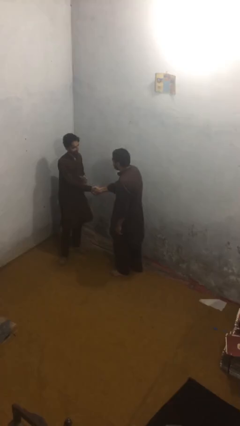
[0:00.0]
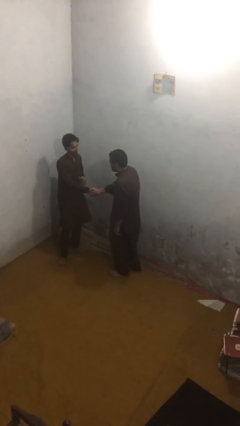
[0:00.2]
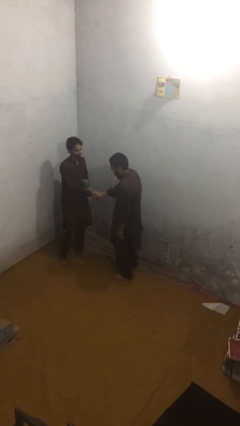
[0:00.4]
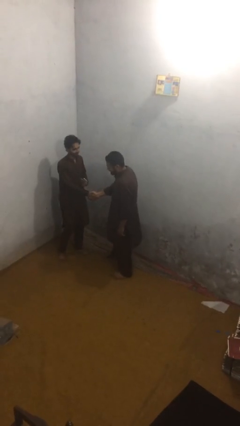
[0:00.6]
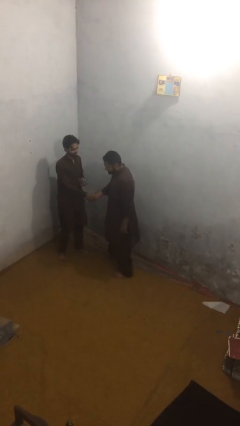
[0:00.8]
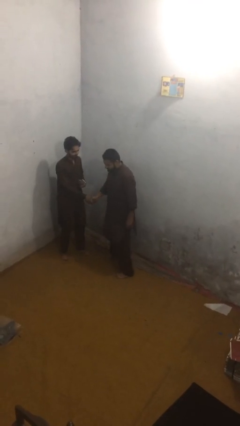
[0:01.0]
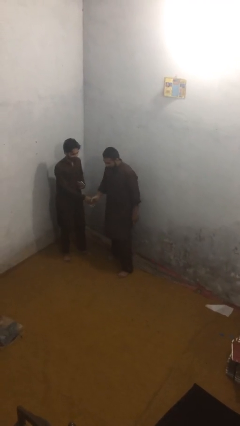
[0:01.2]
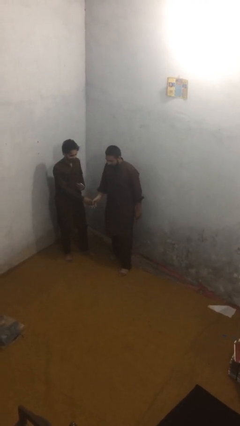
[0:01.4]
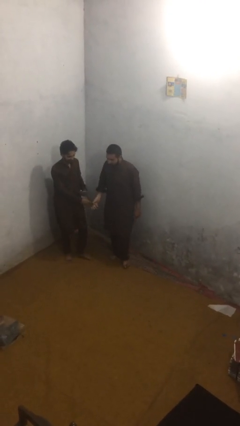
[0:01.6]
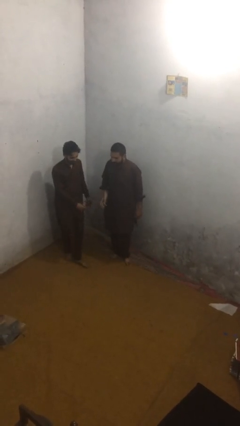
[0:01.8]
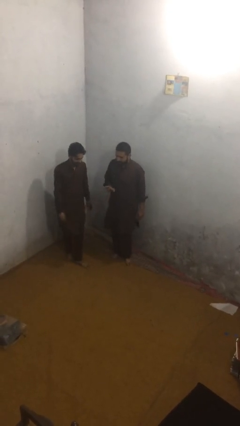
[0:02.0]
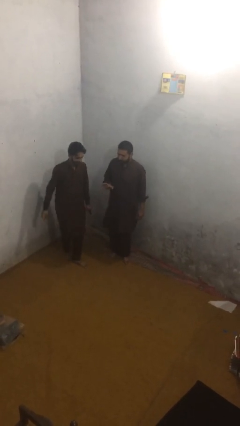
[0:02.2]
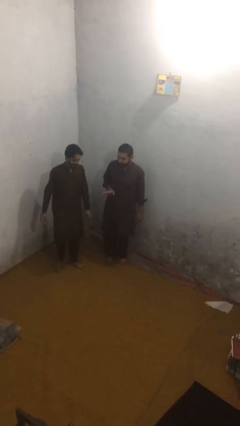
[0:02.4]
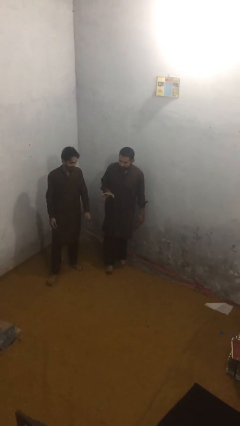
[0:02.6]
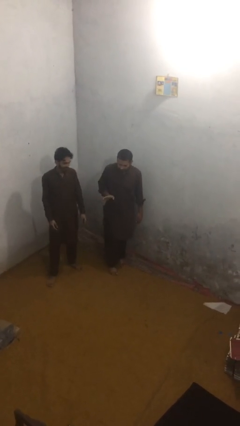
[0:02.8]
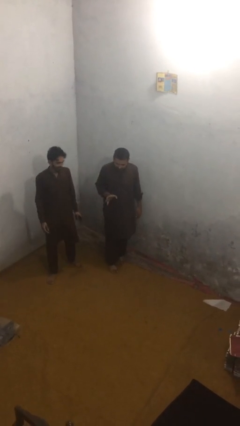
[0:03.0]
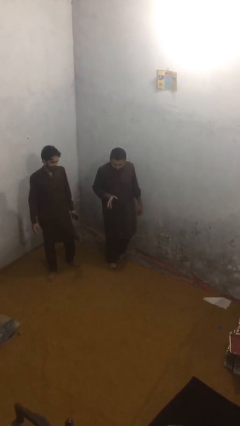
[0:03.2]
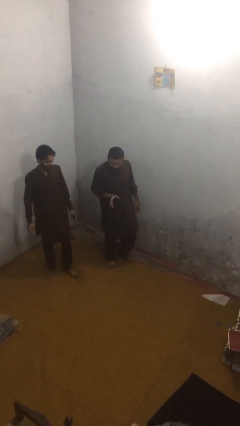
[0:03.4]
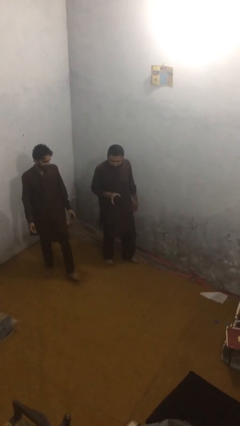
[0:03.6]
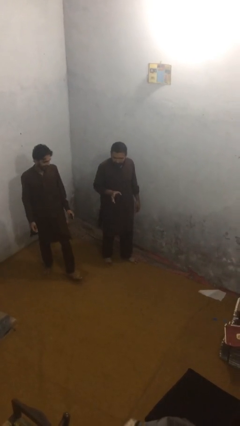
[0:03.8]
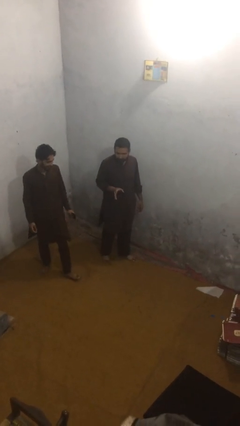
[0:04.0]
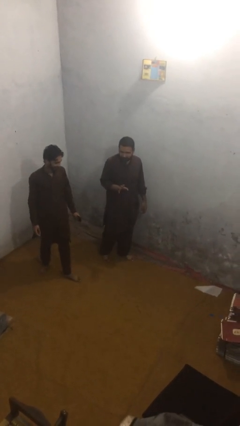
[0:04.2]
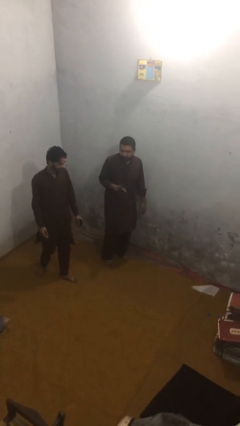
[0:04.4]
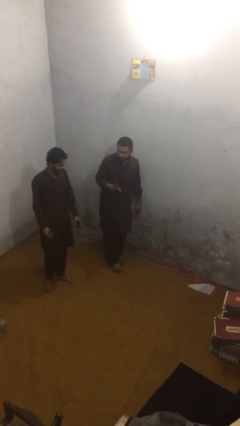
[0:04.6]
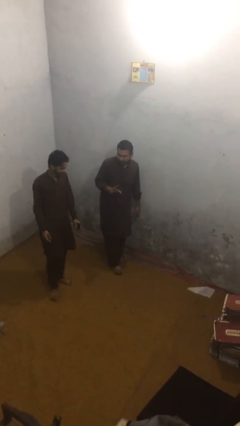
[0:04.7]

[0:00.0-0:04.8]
person talks to person

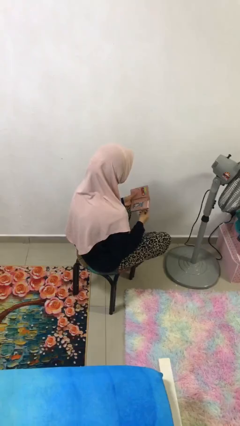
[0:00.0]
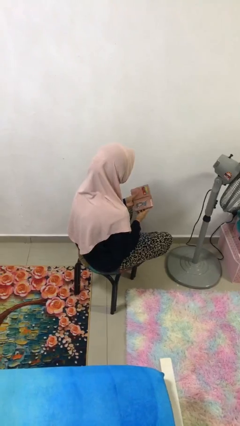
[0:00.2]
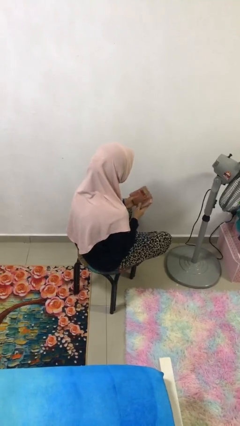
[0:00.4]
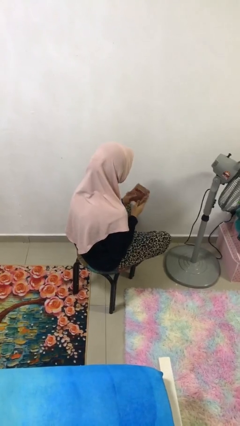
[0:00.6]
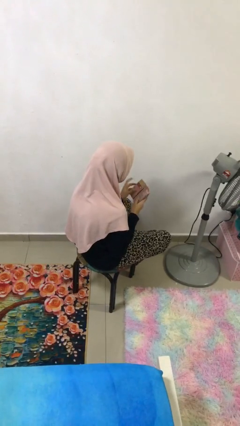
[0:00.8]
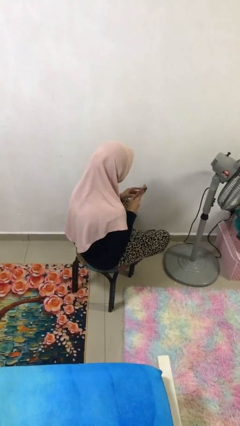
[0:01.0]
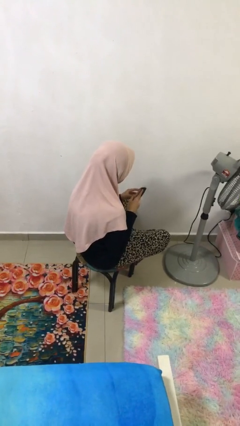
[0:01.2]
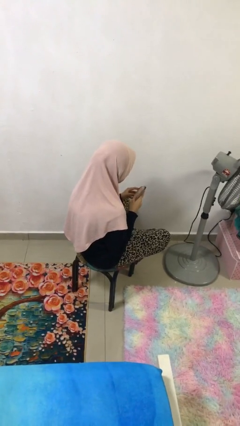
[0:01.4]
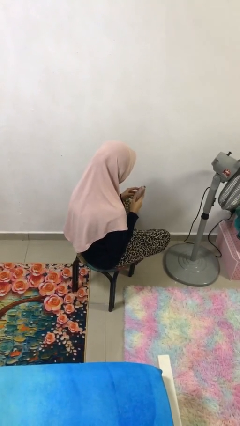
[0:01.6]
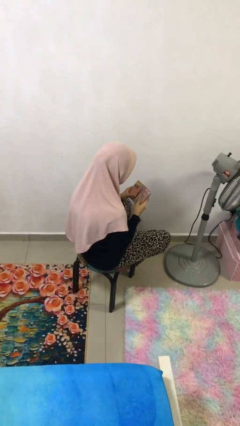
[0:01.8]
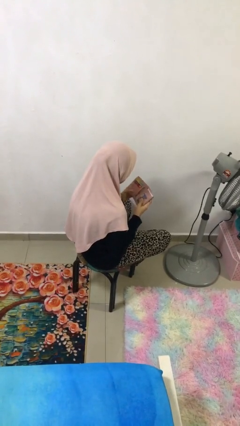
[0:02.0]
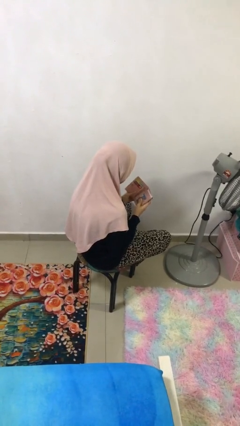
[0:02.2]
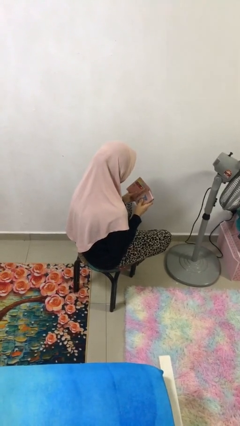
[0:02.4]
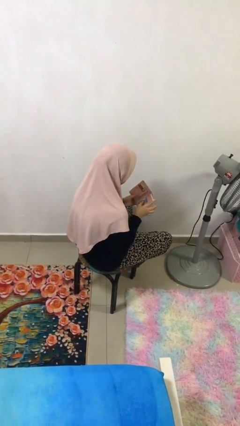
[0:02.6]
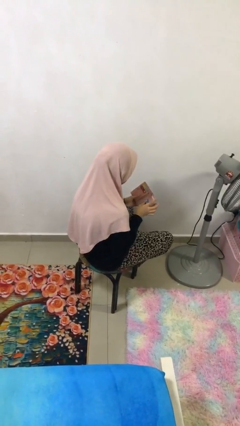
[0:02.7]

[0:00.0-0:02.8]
person searches in purse

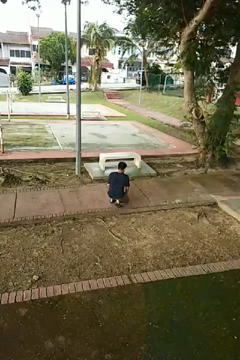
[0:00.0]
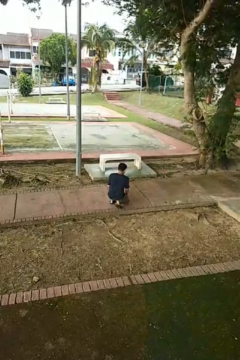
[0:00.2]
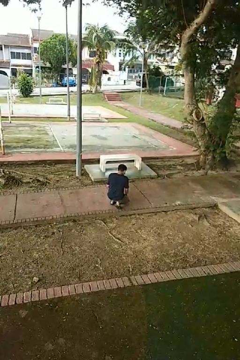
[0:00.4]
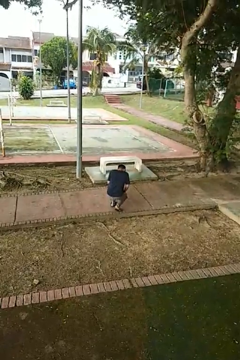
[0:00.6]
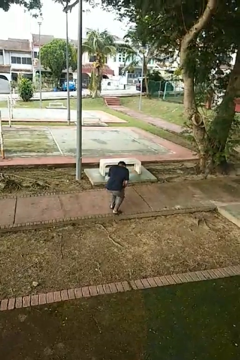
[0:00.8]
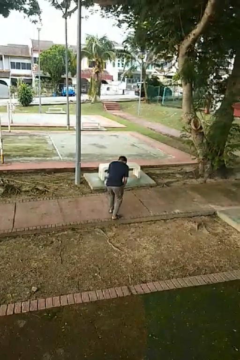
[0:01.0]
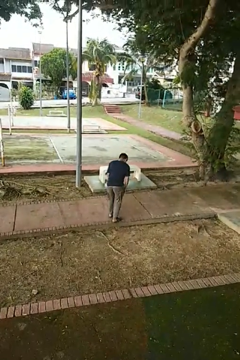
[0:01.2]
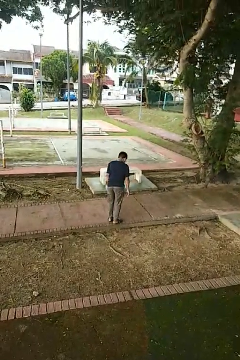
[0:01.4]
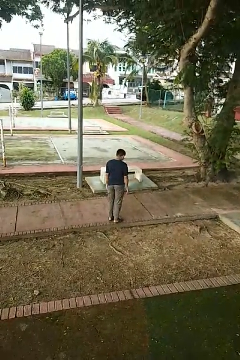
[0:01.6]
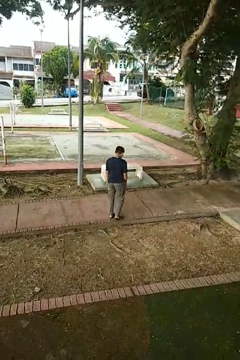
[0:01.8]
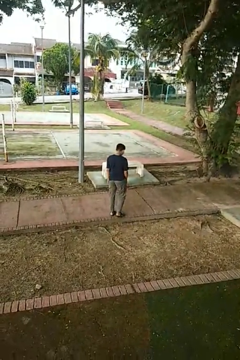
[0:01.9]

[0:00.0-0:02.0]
person stands up from floor

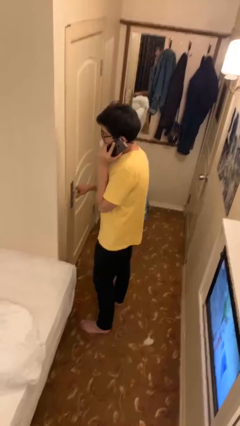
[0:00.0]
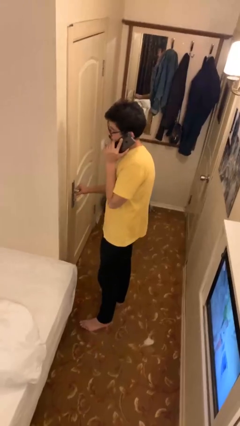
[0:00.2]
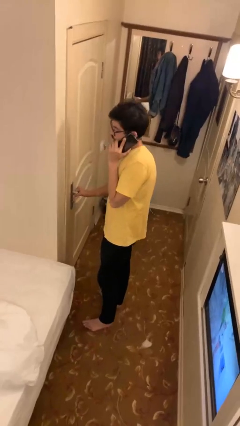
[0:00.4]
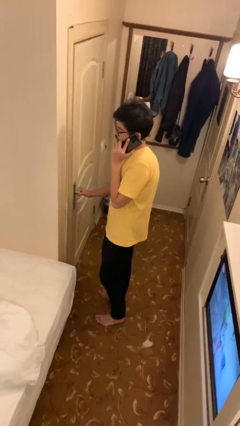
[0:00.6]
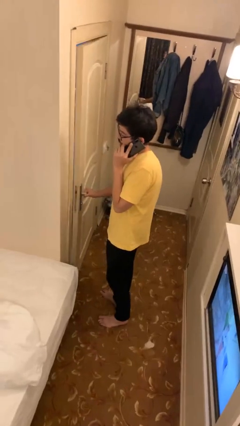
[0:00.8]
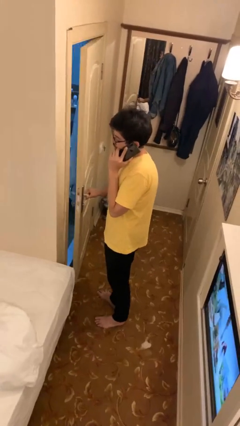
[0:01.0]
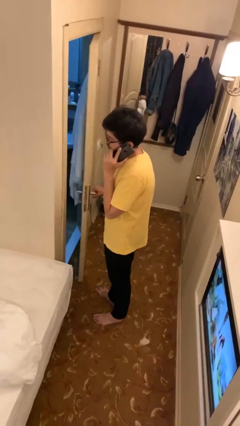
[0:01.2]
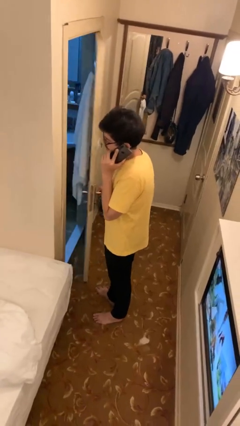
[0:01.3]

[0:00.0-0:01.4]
person opens facility door

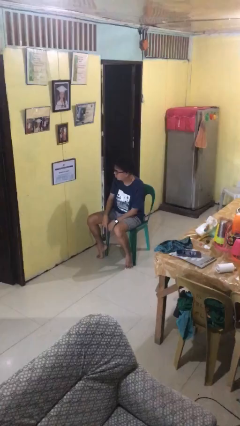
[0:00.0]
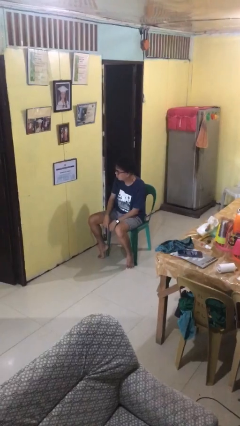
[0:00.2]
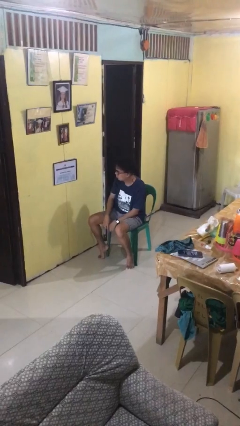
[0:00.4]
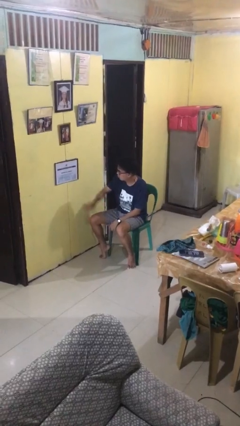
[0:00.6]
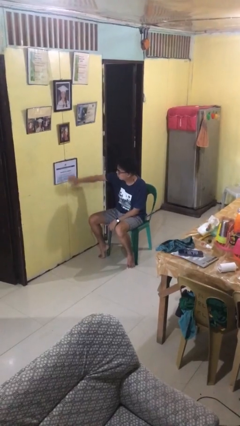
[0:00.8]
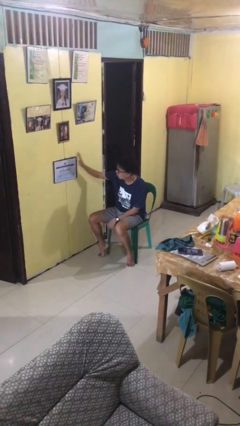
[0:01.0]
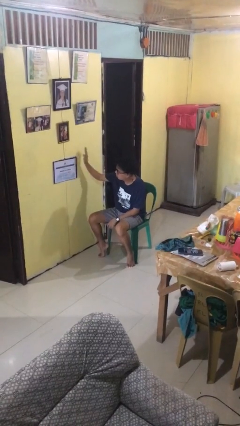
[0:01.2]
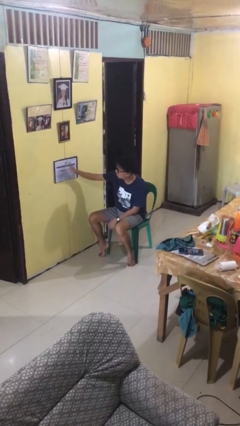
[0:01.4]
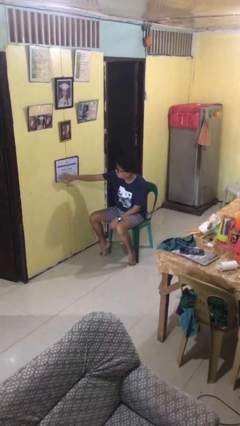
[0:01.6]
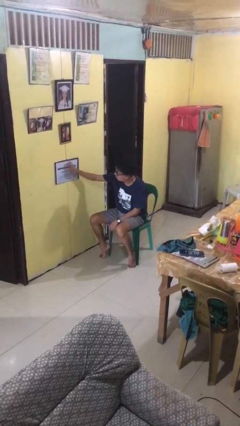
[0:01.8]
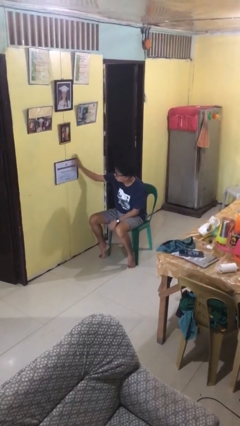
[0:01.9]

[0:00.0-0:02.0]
person waves hand over object

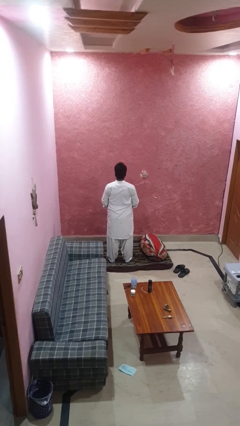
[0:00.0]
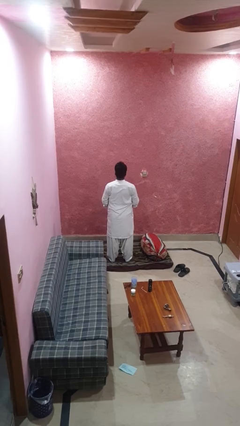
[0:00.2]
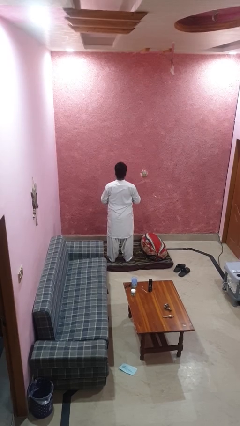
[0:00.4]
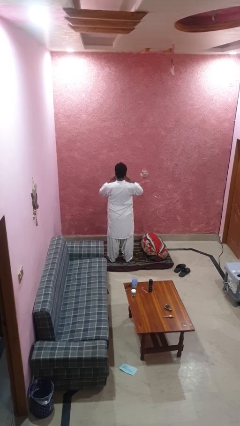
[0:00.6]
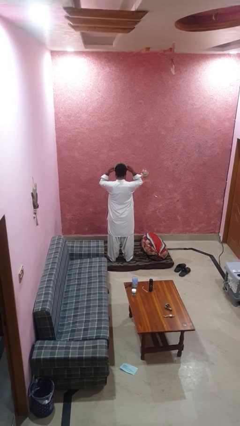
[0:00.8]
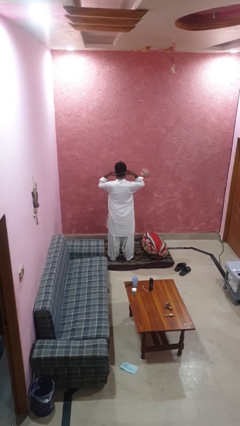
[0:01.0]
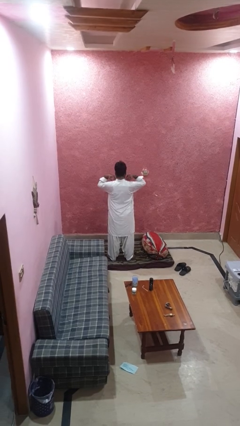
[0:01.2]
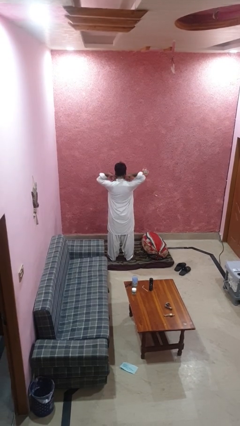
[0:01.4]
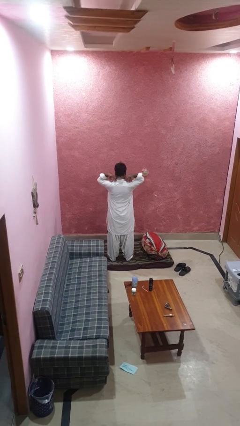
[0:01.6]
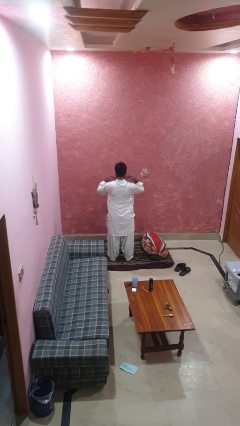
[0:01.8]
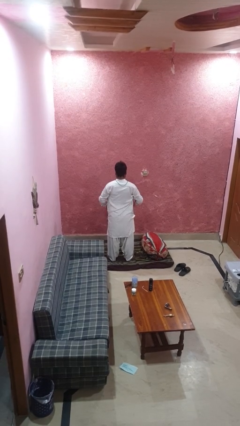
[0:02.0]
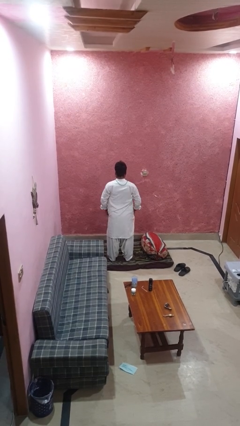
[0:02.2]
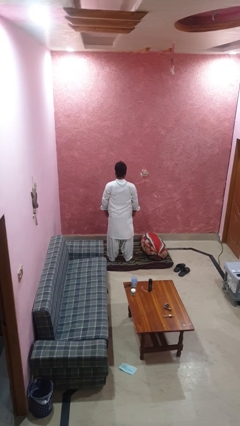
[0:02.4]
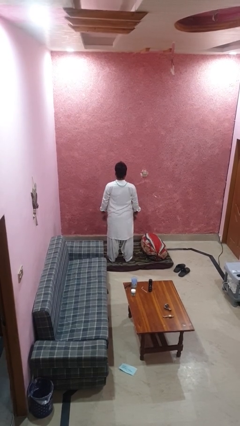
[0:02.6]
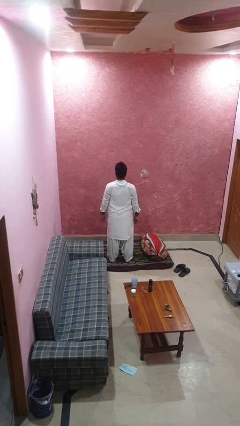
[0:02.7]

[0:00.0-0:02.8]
person puts on necklace

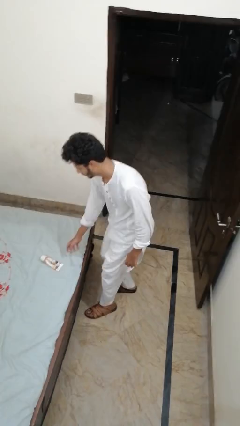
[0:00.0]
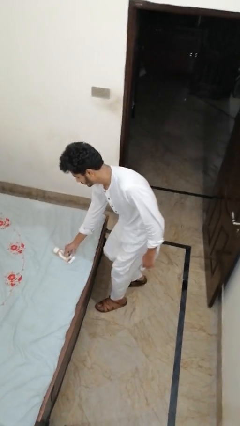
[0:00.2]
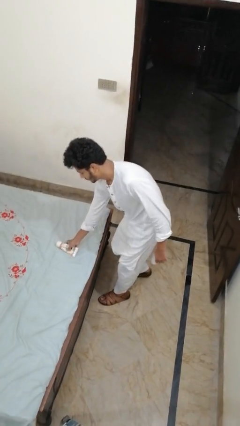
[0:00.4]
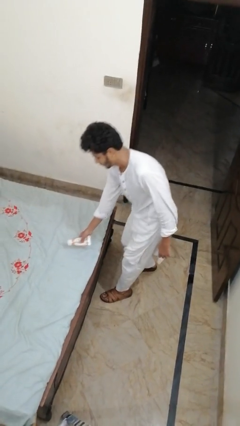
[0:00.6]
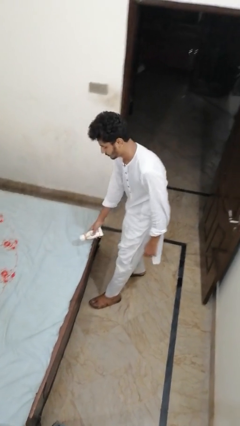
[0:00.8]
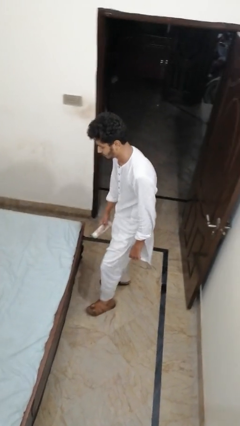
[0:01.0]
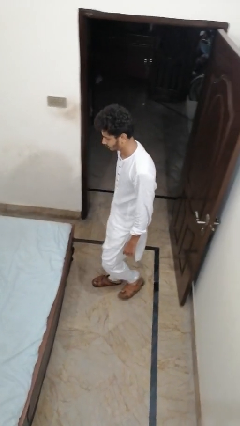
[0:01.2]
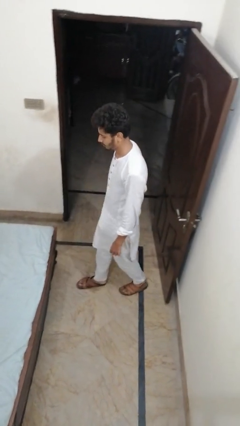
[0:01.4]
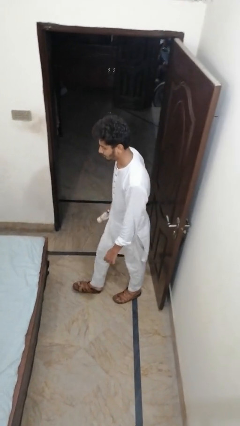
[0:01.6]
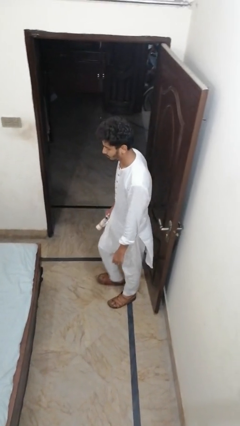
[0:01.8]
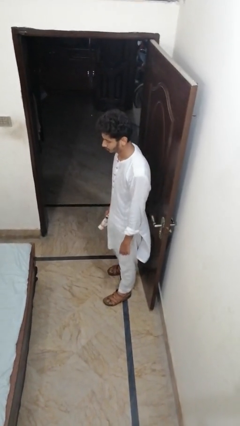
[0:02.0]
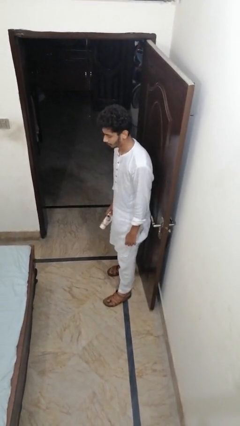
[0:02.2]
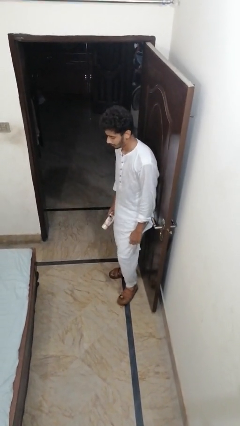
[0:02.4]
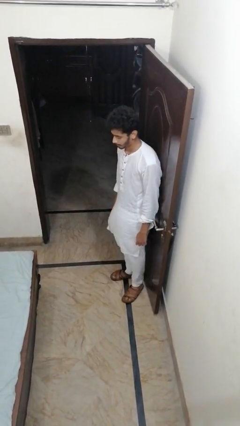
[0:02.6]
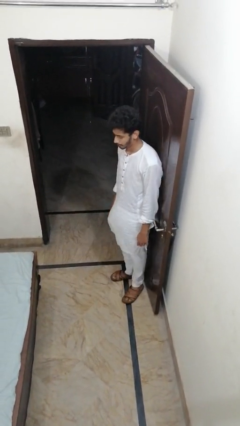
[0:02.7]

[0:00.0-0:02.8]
person picks up object from bed
